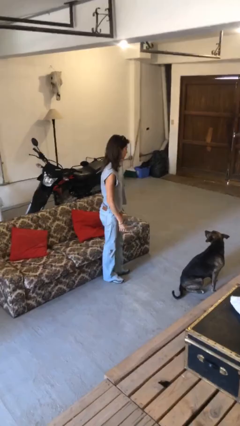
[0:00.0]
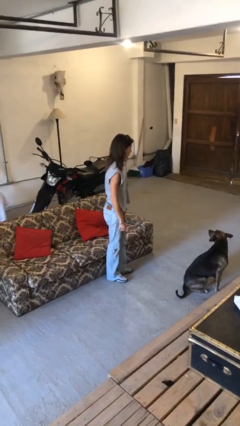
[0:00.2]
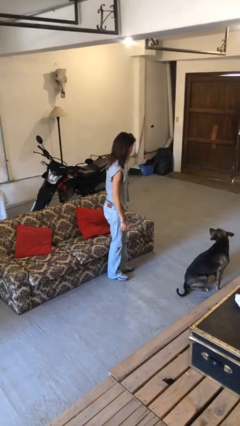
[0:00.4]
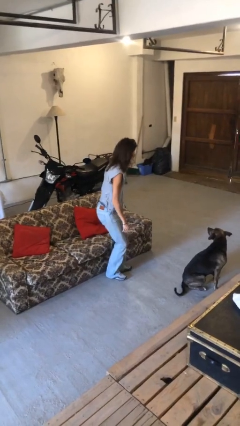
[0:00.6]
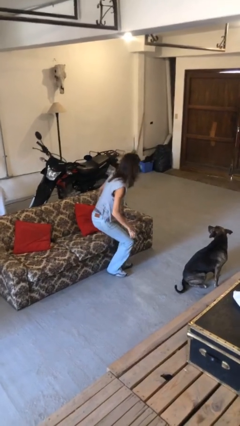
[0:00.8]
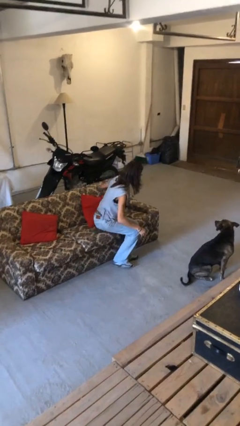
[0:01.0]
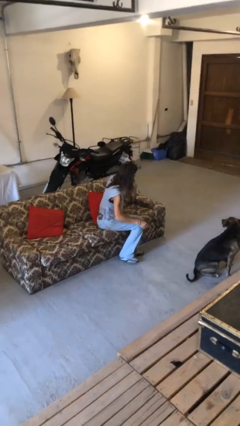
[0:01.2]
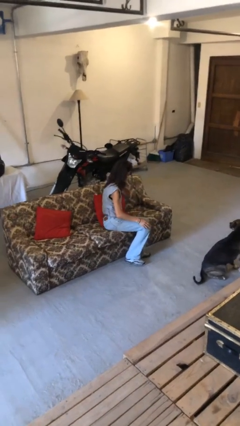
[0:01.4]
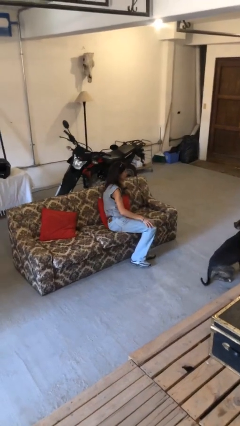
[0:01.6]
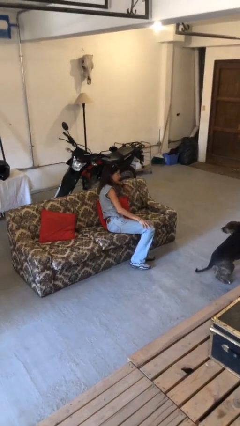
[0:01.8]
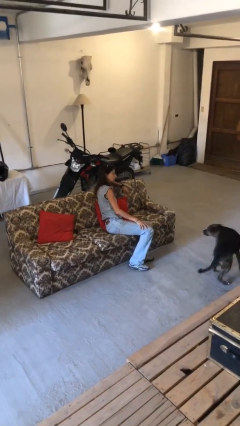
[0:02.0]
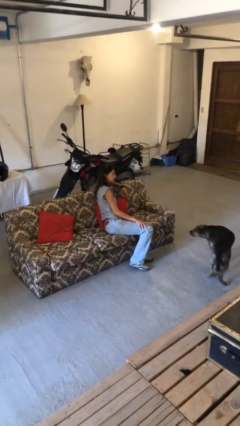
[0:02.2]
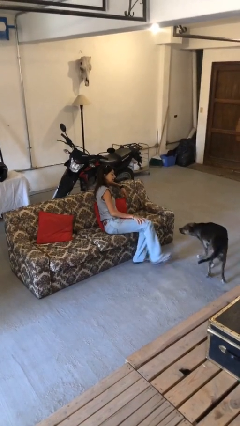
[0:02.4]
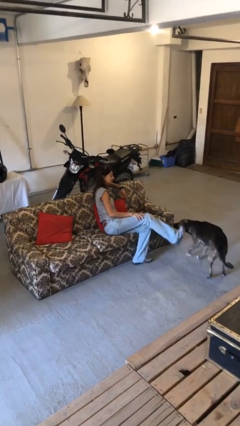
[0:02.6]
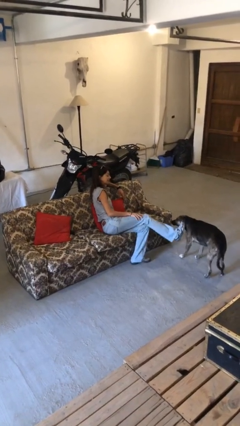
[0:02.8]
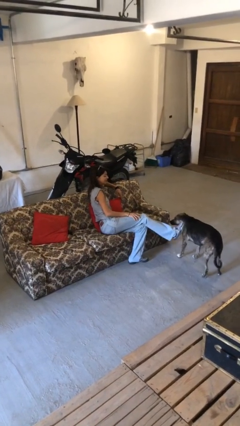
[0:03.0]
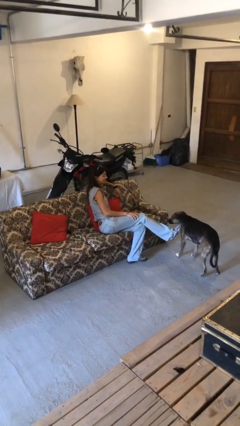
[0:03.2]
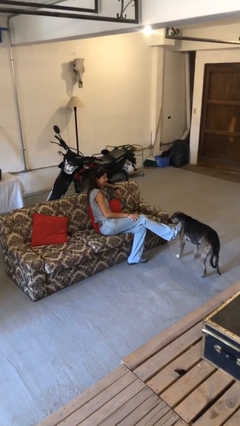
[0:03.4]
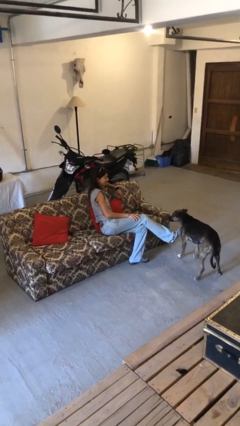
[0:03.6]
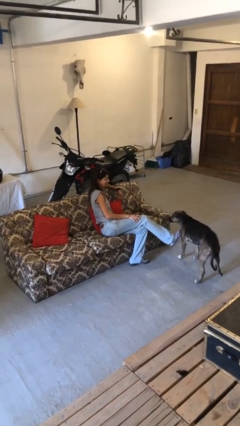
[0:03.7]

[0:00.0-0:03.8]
person lies down on couch

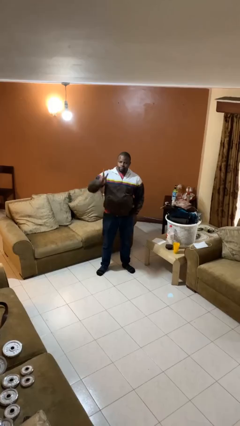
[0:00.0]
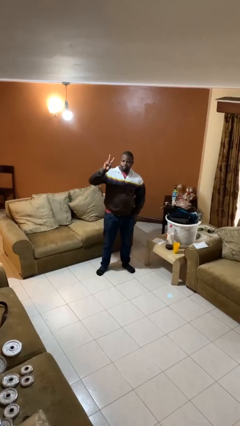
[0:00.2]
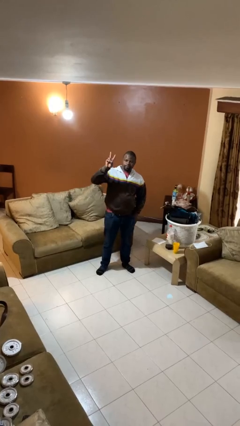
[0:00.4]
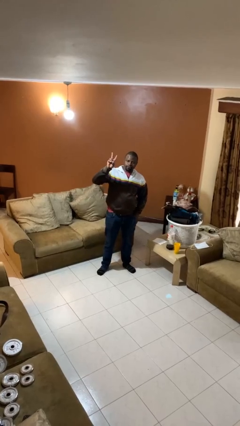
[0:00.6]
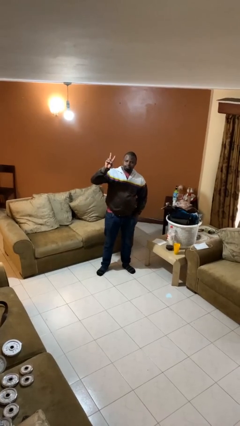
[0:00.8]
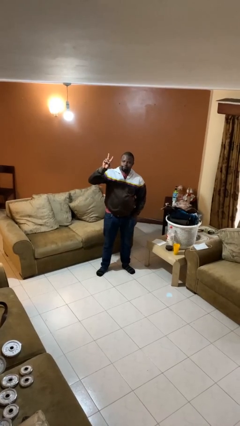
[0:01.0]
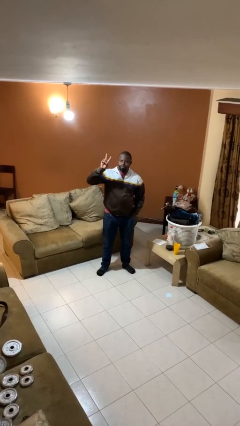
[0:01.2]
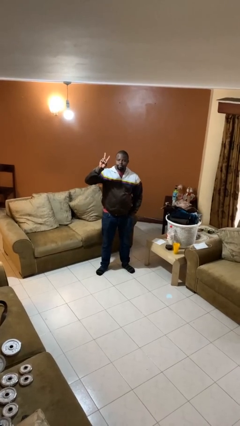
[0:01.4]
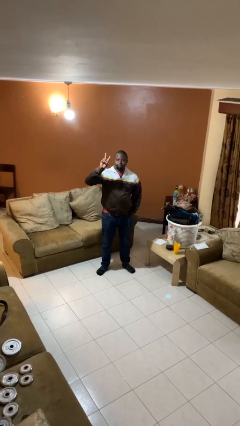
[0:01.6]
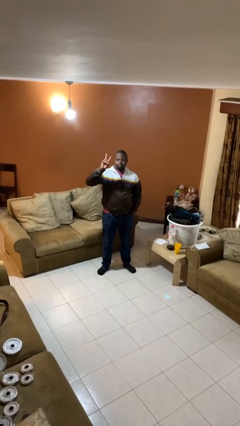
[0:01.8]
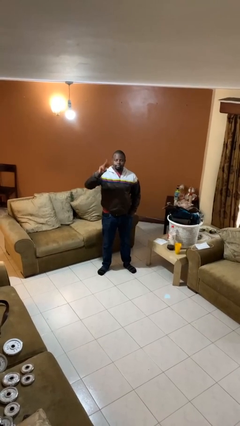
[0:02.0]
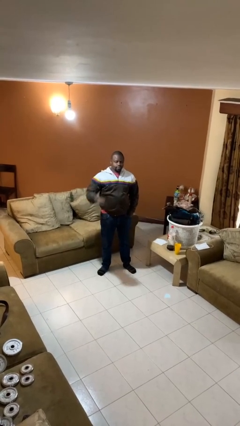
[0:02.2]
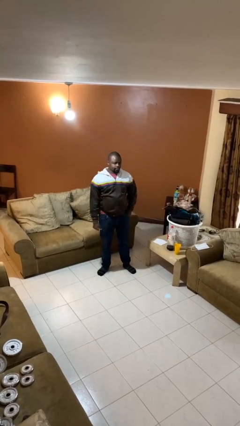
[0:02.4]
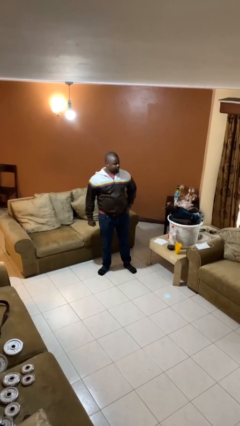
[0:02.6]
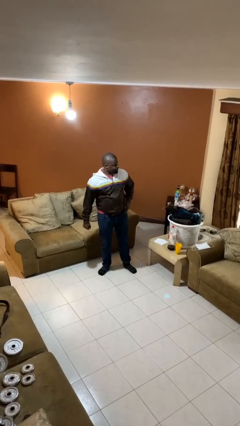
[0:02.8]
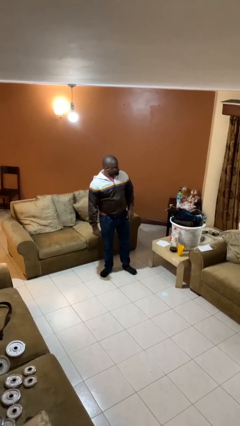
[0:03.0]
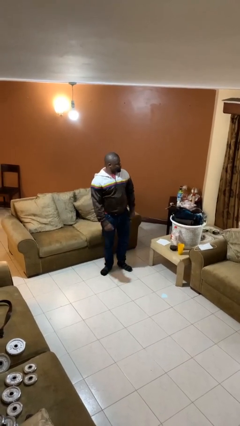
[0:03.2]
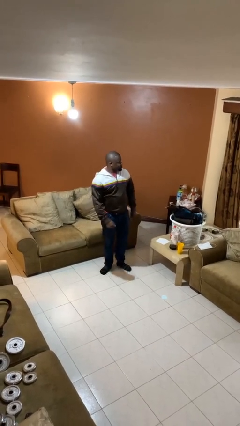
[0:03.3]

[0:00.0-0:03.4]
person gestures peace

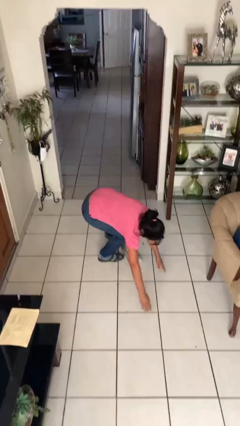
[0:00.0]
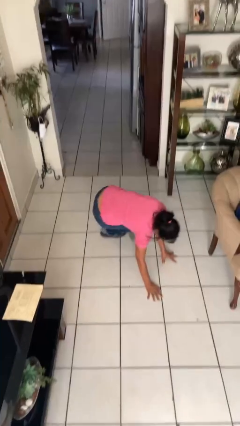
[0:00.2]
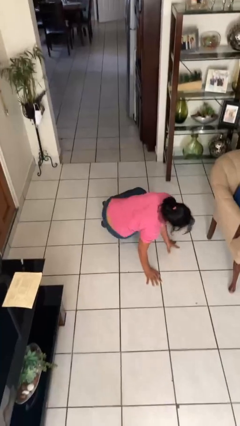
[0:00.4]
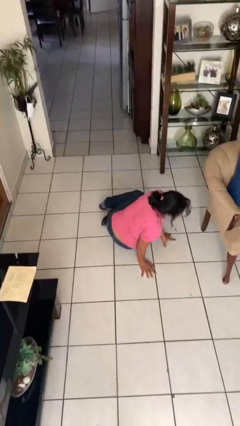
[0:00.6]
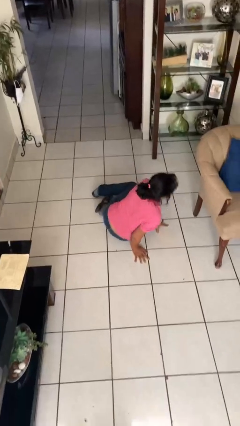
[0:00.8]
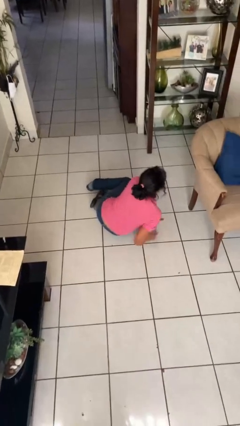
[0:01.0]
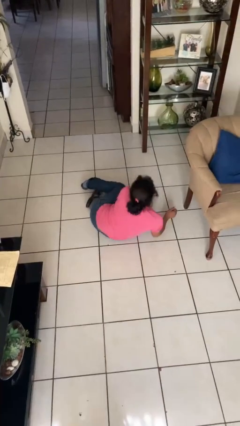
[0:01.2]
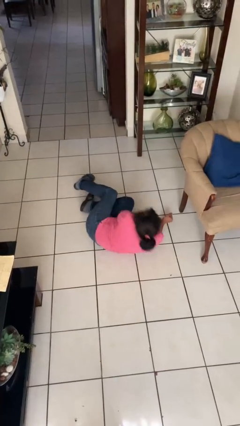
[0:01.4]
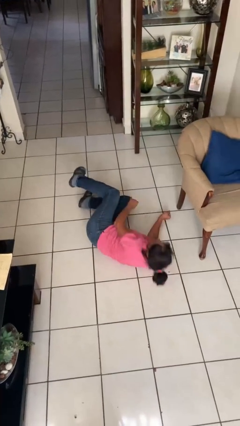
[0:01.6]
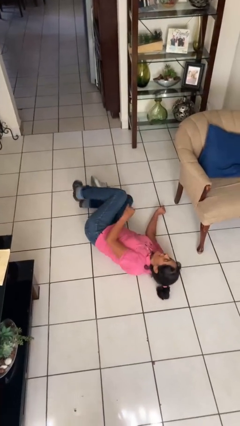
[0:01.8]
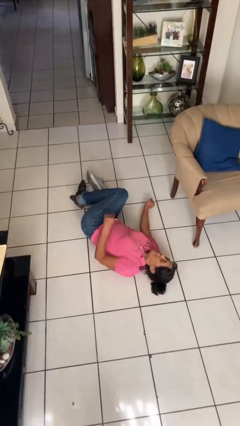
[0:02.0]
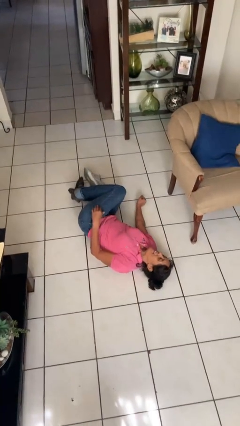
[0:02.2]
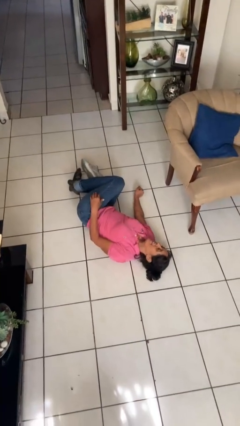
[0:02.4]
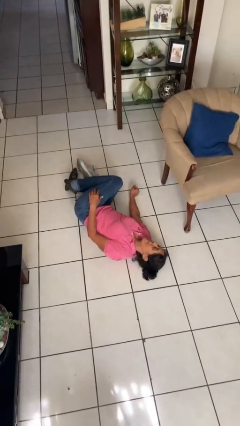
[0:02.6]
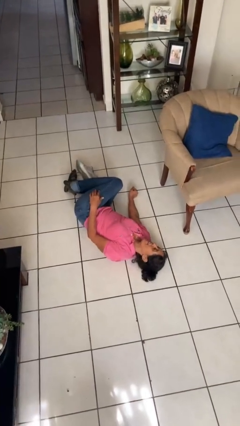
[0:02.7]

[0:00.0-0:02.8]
person lies down on floor

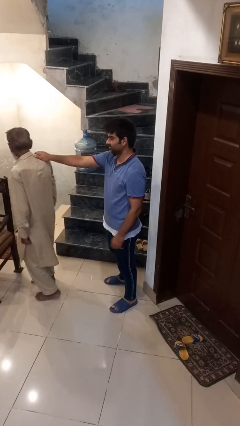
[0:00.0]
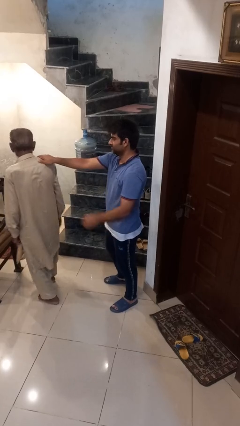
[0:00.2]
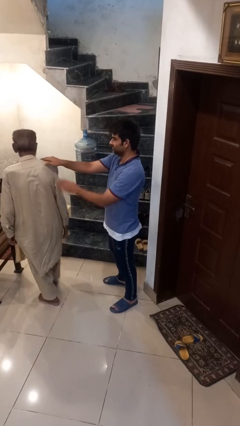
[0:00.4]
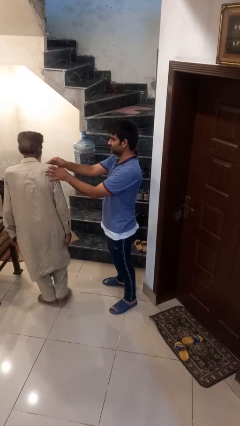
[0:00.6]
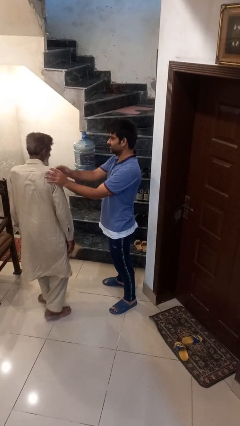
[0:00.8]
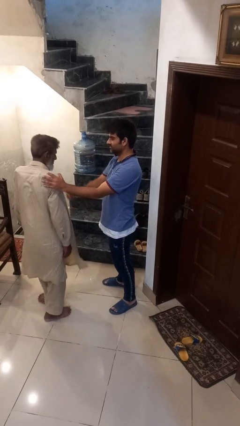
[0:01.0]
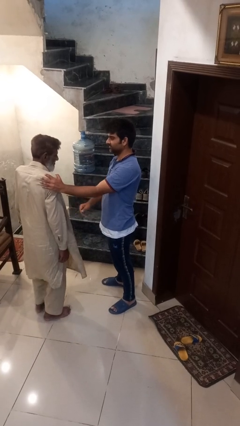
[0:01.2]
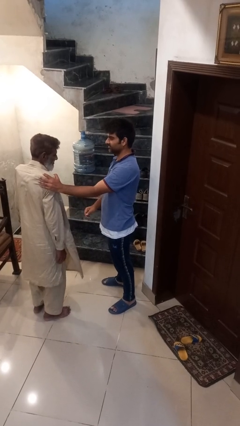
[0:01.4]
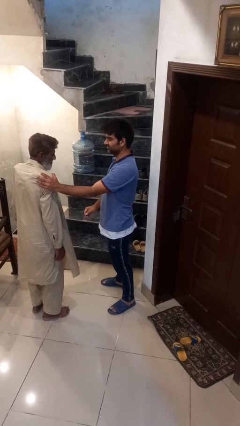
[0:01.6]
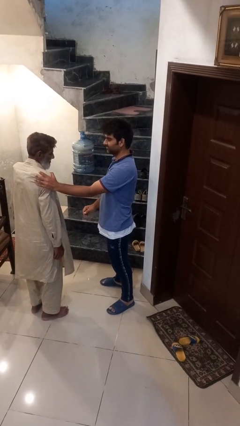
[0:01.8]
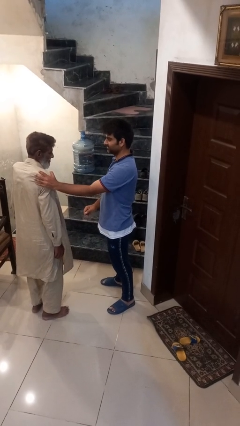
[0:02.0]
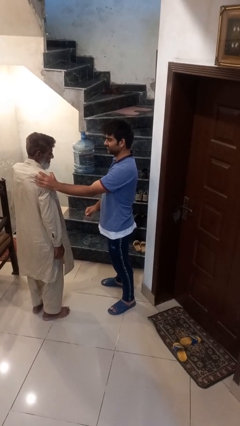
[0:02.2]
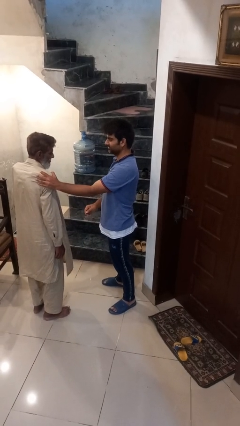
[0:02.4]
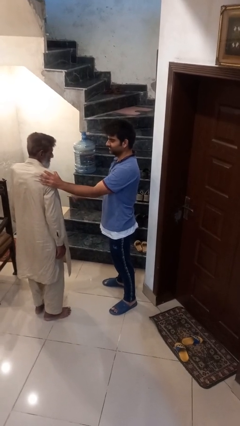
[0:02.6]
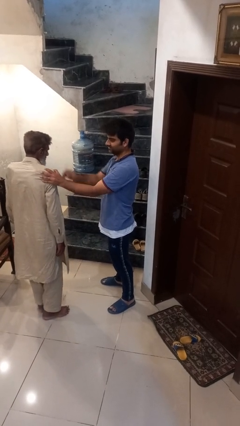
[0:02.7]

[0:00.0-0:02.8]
person spins person around

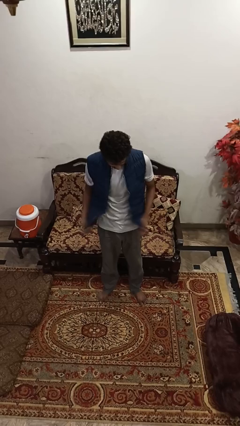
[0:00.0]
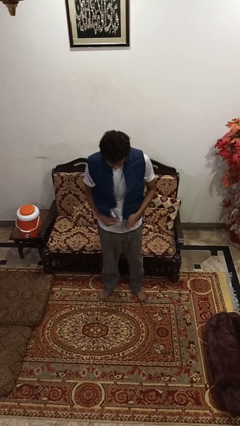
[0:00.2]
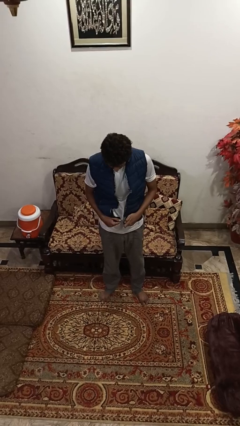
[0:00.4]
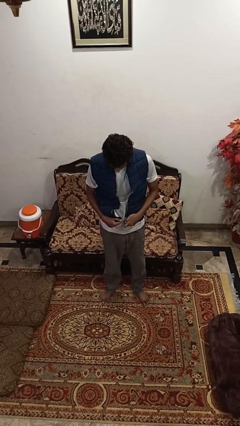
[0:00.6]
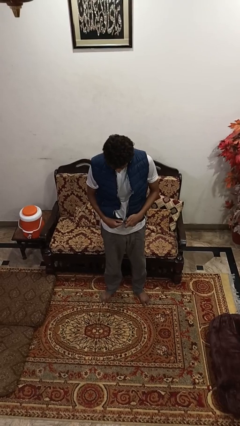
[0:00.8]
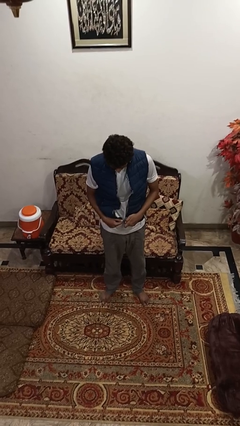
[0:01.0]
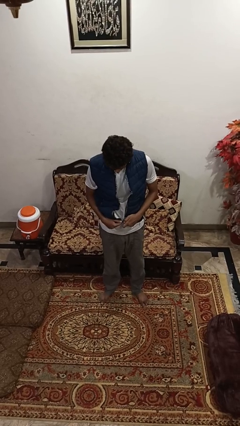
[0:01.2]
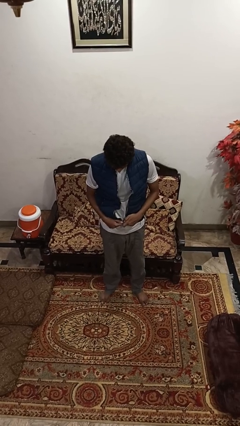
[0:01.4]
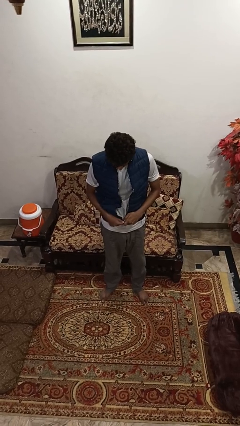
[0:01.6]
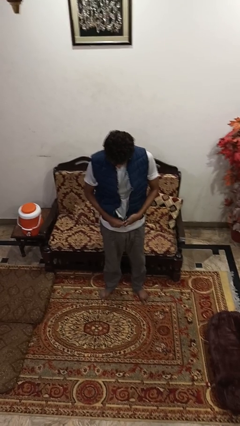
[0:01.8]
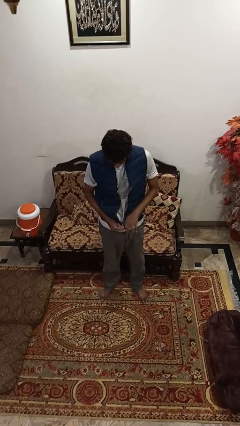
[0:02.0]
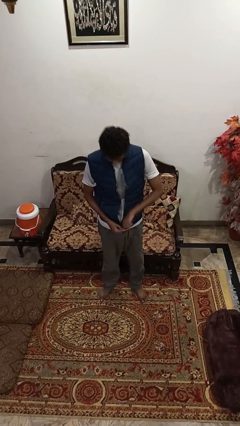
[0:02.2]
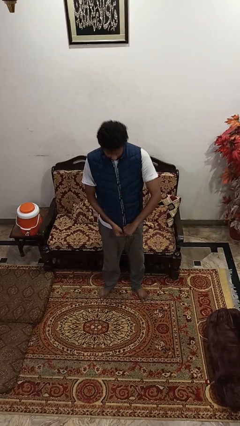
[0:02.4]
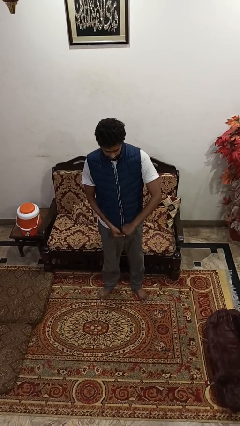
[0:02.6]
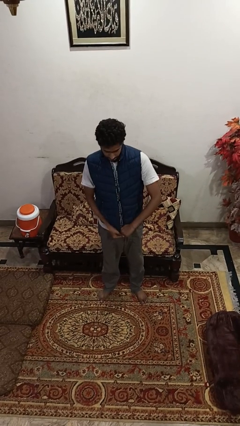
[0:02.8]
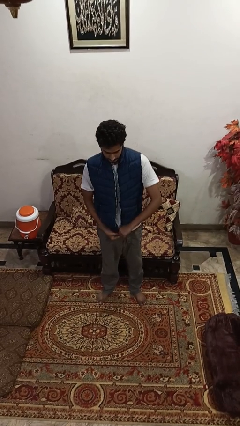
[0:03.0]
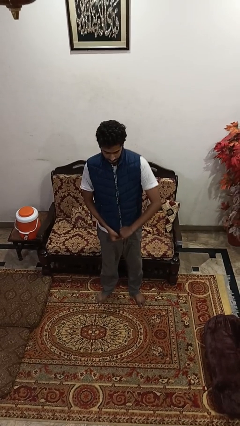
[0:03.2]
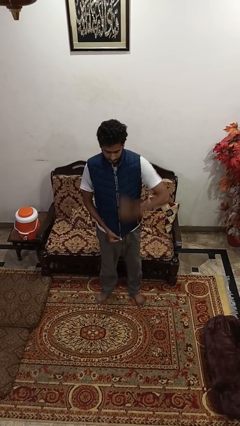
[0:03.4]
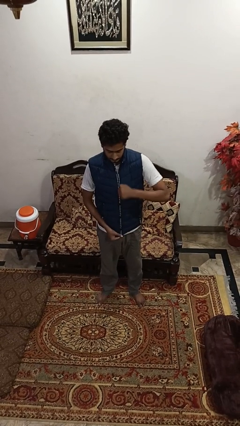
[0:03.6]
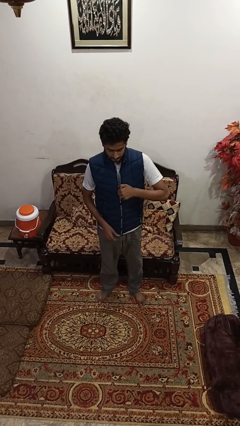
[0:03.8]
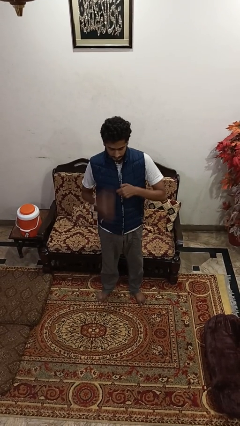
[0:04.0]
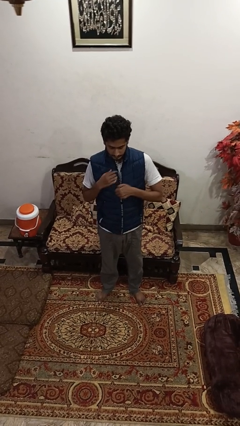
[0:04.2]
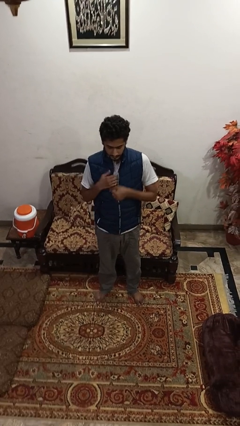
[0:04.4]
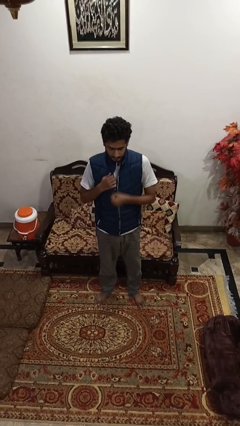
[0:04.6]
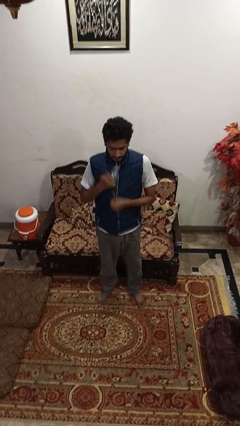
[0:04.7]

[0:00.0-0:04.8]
person zips up jacket
